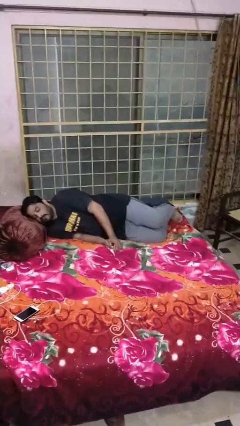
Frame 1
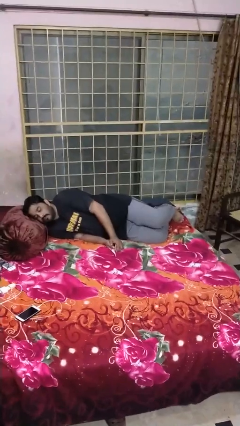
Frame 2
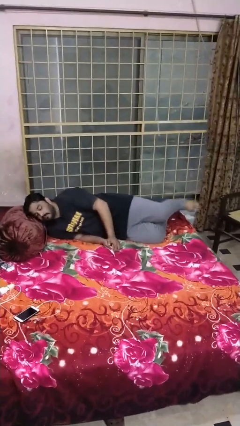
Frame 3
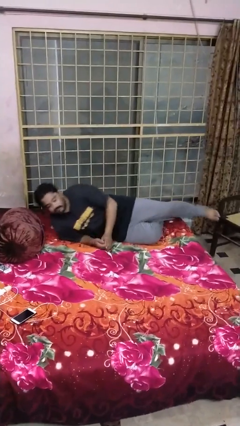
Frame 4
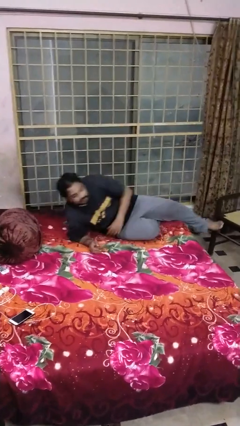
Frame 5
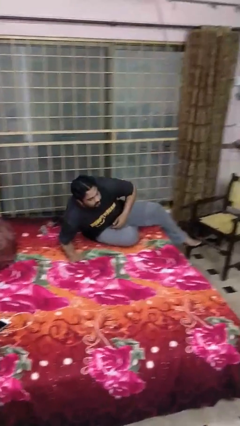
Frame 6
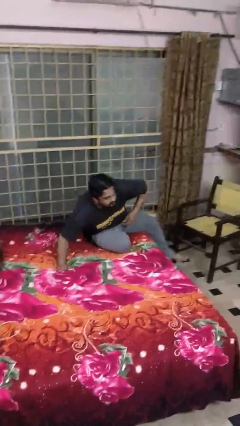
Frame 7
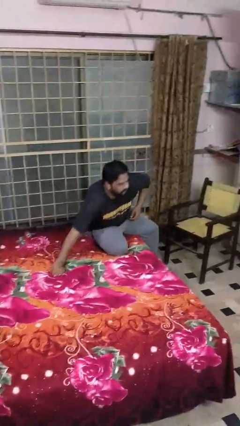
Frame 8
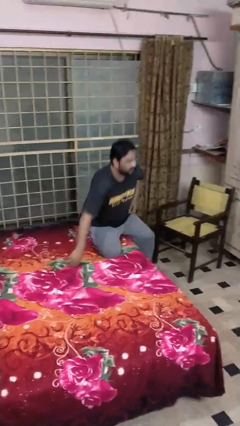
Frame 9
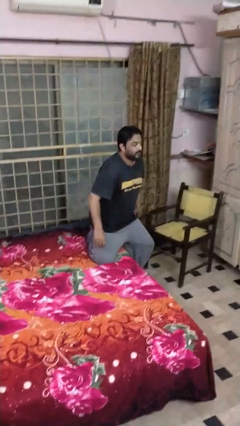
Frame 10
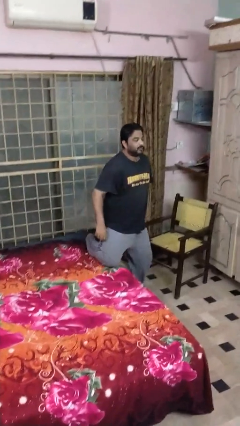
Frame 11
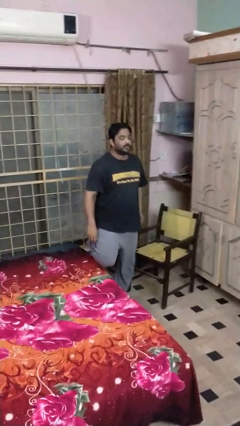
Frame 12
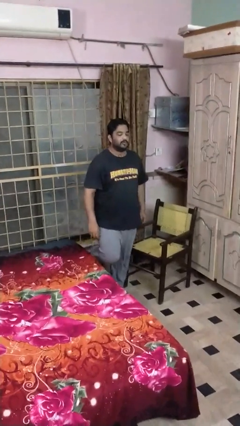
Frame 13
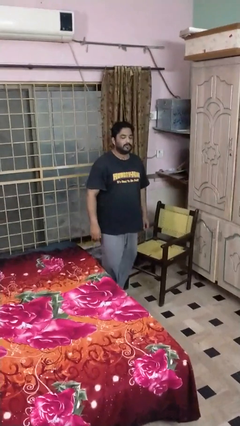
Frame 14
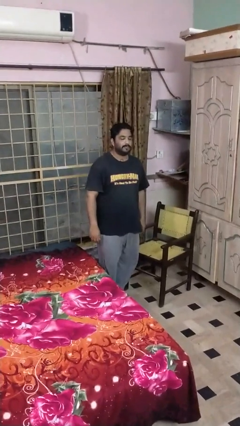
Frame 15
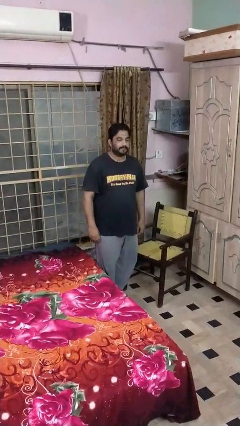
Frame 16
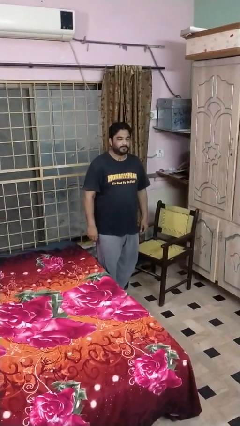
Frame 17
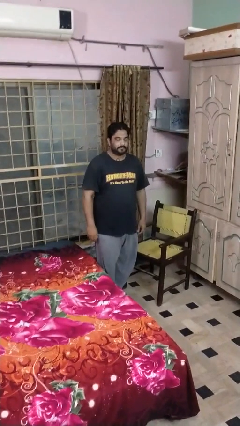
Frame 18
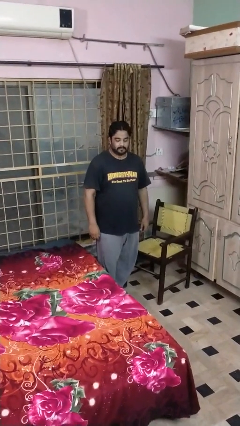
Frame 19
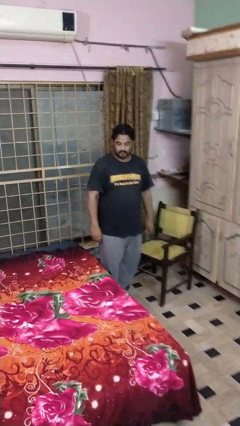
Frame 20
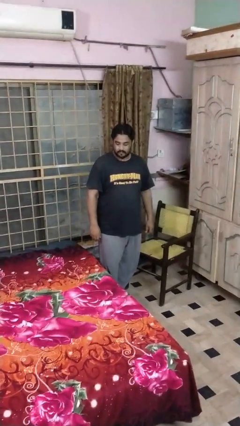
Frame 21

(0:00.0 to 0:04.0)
person stands up

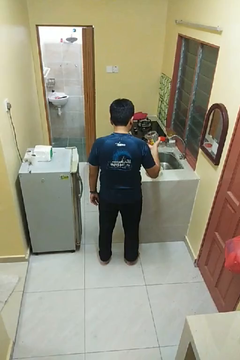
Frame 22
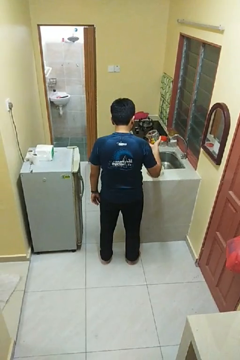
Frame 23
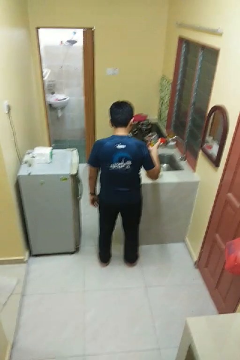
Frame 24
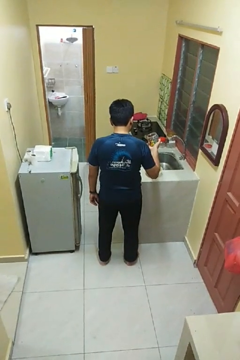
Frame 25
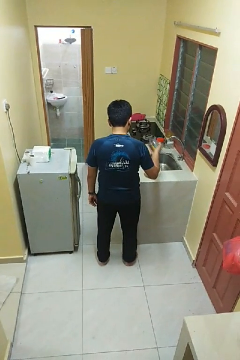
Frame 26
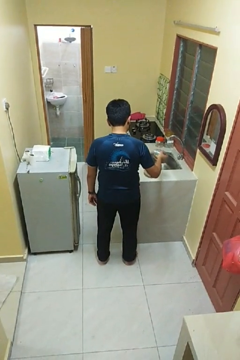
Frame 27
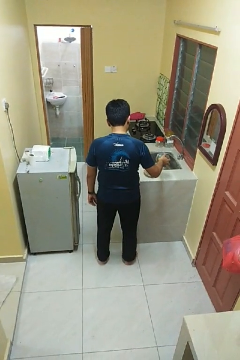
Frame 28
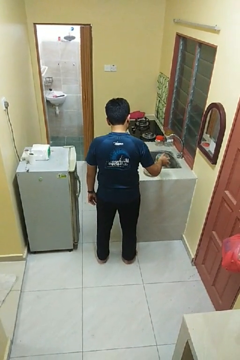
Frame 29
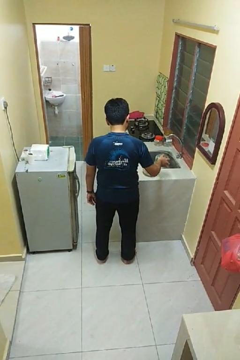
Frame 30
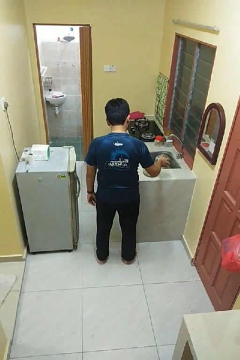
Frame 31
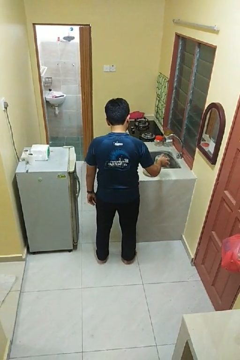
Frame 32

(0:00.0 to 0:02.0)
person pours into bowl

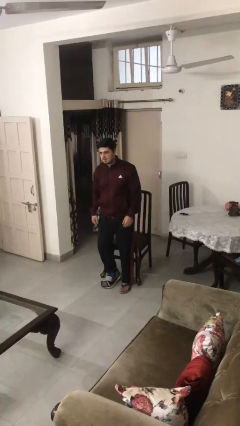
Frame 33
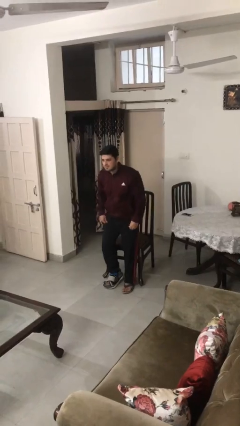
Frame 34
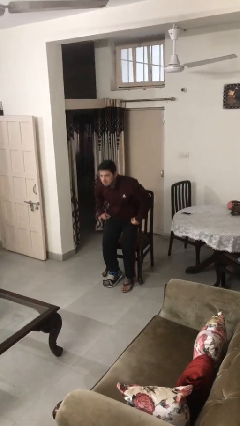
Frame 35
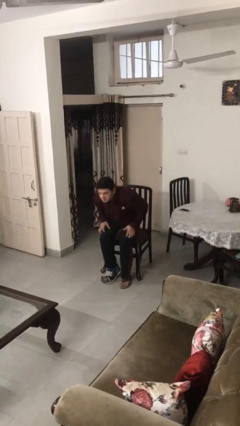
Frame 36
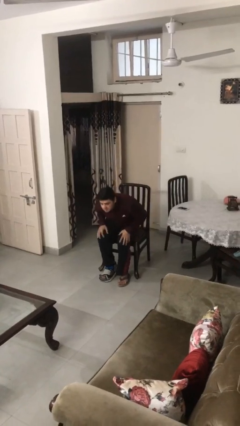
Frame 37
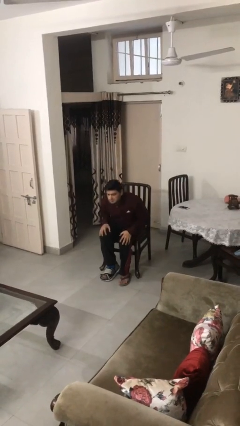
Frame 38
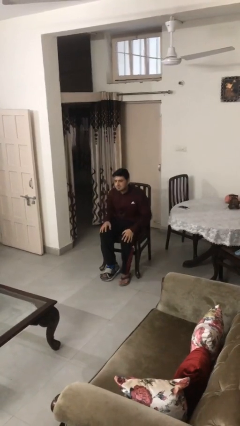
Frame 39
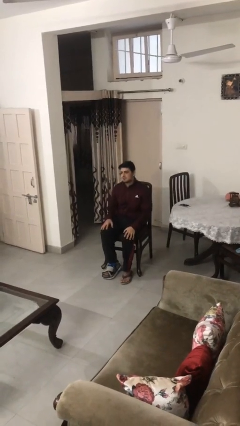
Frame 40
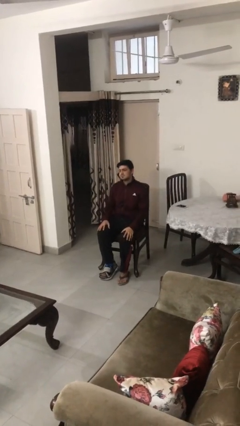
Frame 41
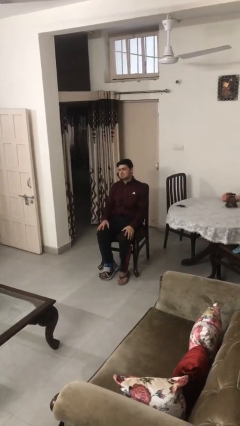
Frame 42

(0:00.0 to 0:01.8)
person sits down

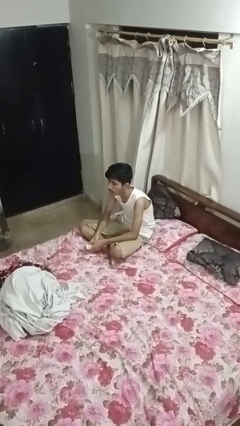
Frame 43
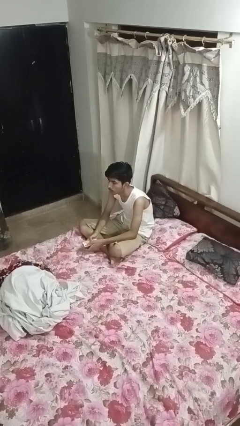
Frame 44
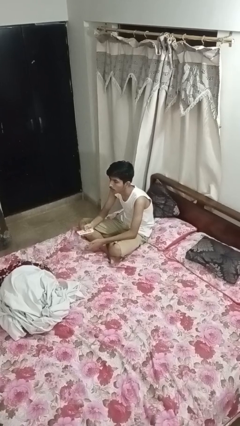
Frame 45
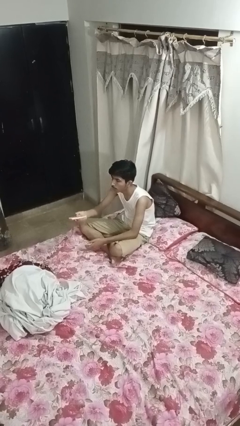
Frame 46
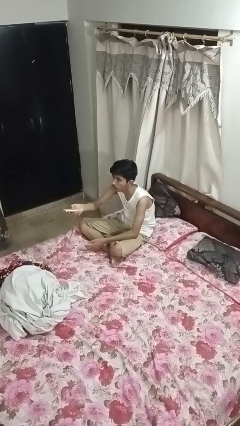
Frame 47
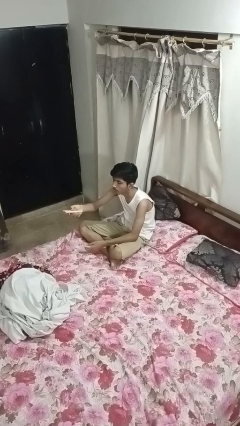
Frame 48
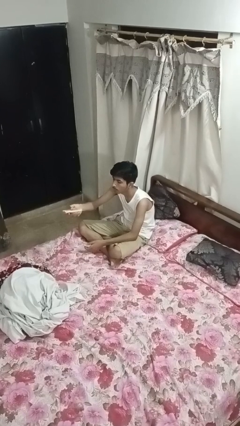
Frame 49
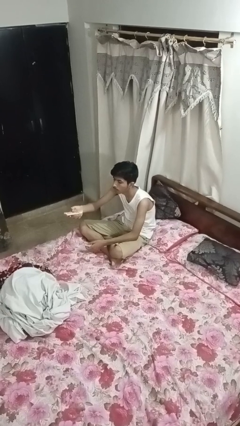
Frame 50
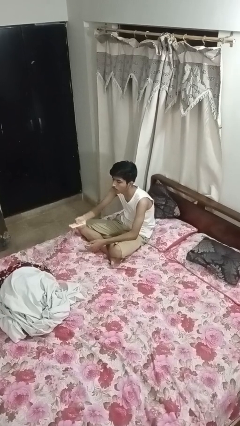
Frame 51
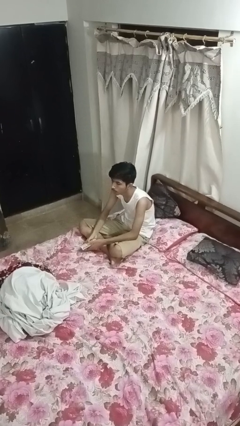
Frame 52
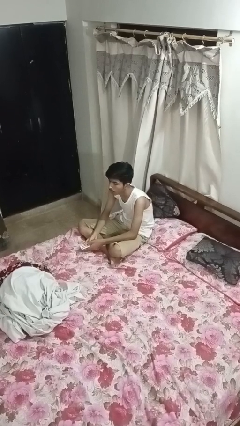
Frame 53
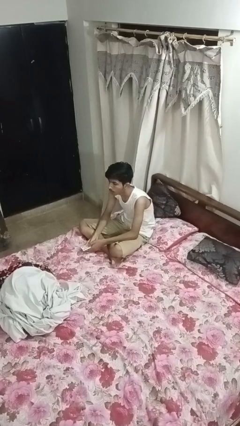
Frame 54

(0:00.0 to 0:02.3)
person uses television remote

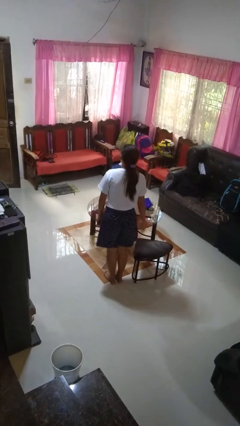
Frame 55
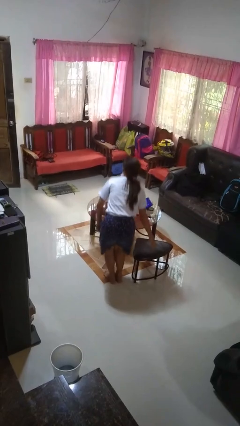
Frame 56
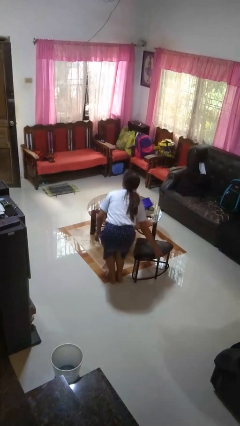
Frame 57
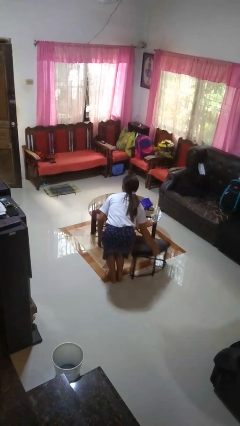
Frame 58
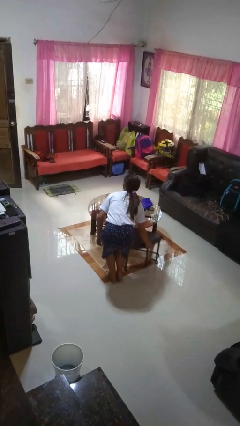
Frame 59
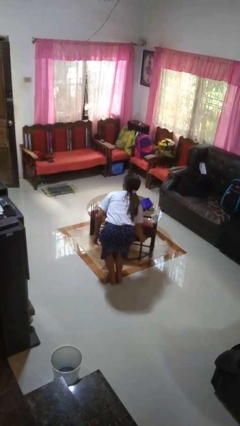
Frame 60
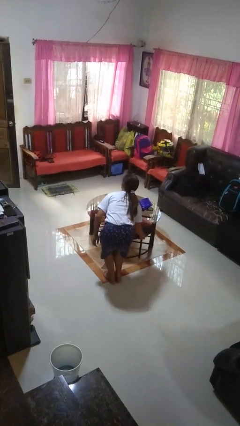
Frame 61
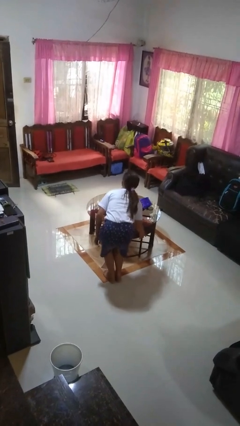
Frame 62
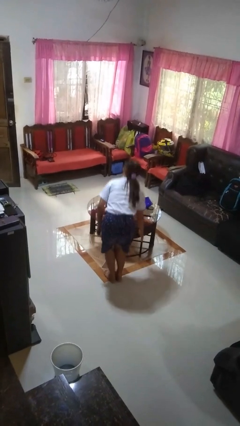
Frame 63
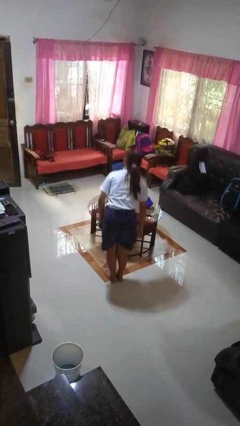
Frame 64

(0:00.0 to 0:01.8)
person pushes in chair

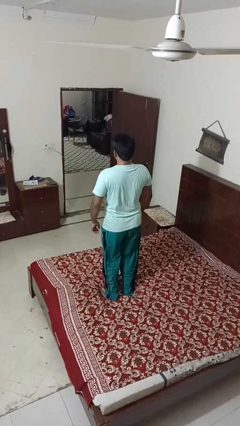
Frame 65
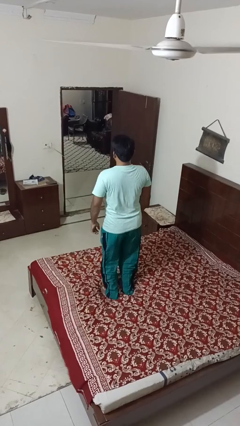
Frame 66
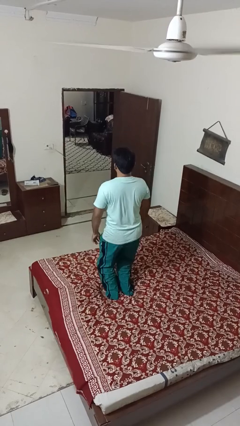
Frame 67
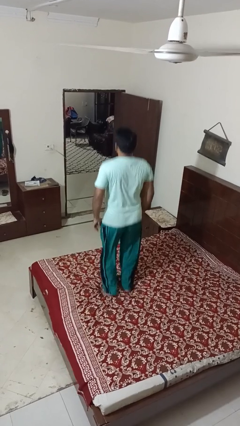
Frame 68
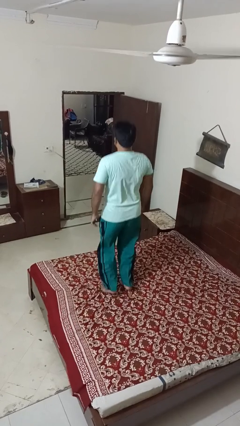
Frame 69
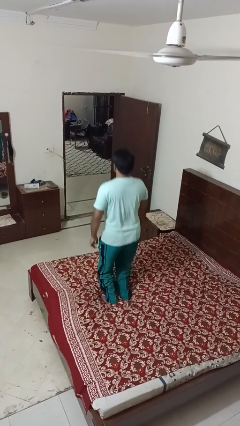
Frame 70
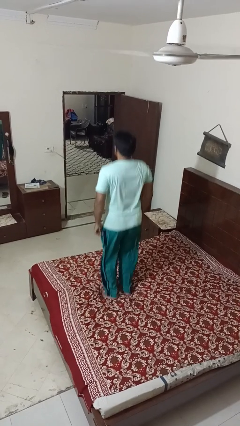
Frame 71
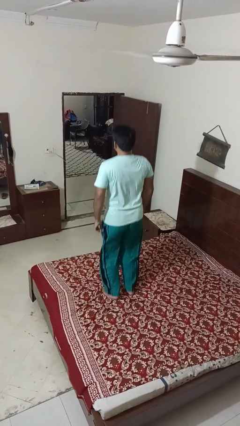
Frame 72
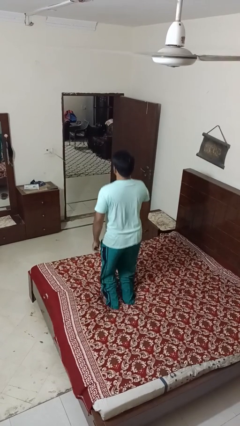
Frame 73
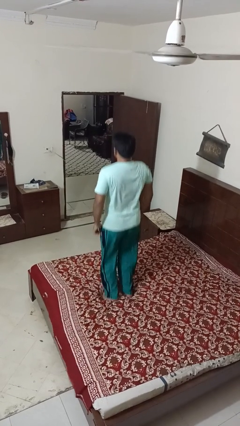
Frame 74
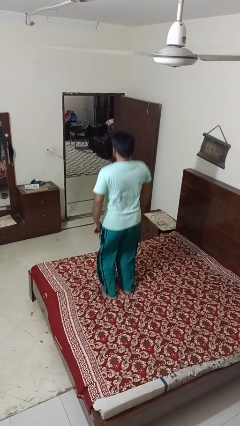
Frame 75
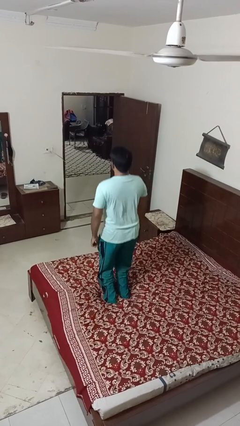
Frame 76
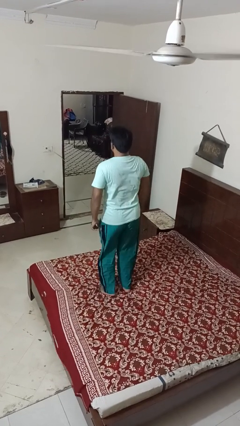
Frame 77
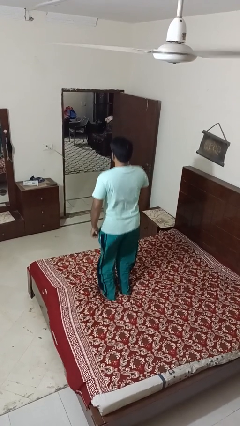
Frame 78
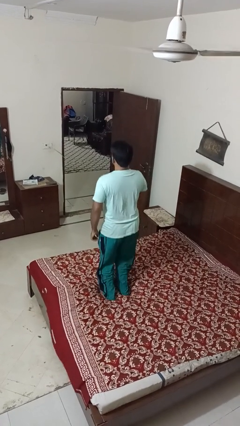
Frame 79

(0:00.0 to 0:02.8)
person jumps on bed

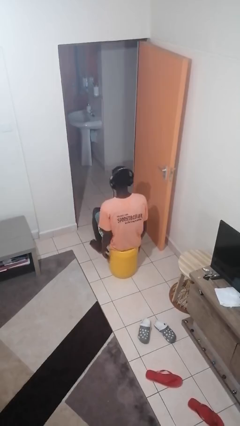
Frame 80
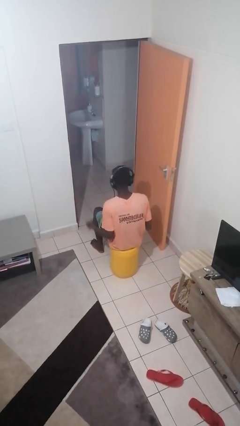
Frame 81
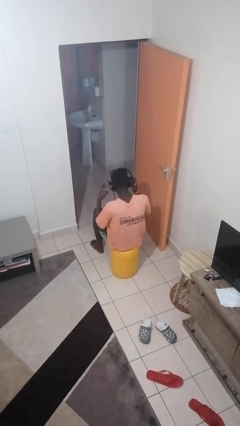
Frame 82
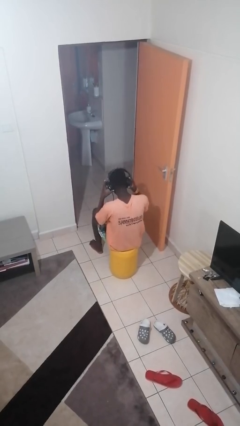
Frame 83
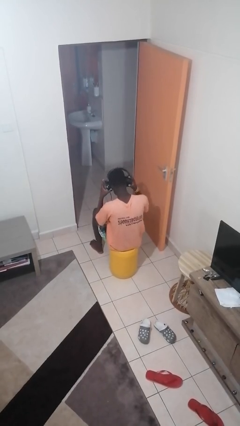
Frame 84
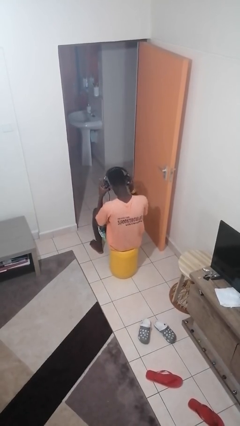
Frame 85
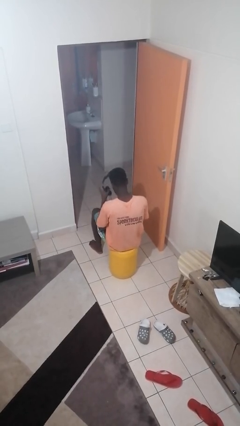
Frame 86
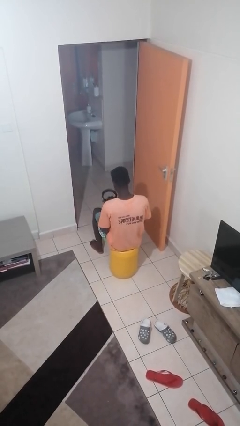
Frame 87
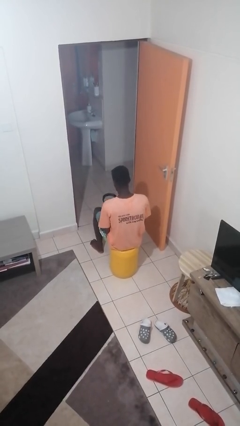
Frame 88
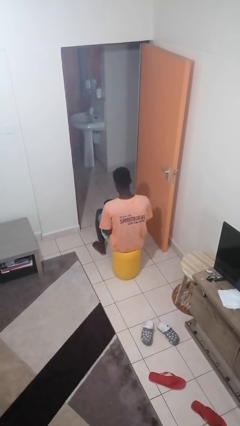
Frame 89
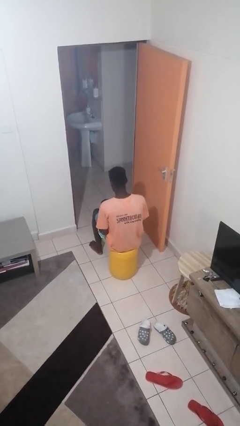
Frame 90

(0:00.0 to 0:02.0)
person takes off headphones

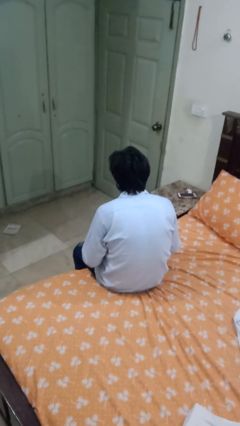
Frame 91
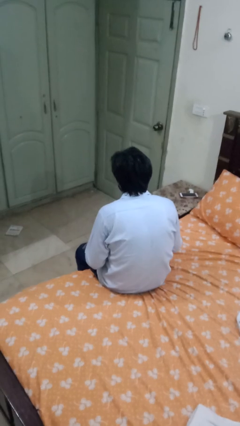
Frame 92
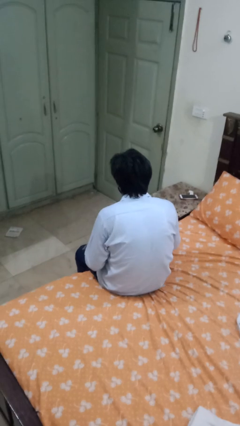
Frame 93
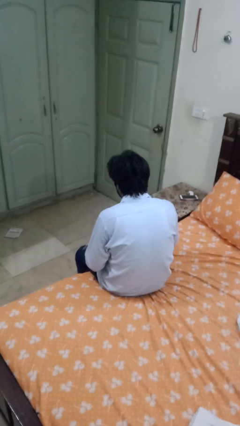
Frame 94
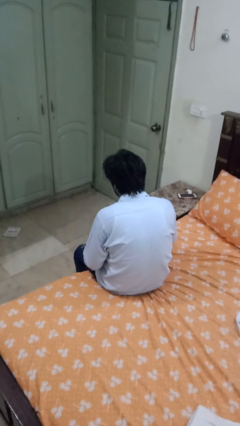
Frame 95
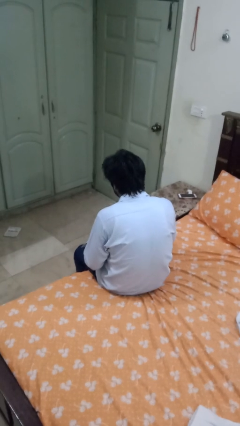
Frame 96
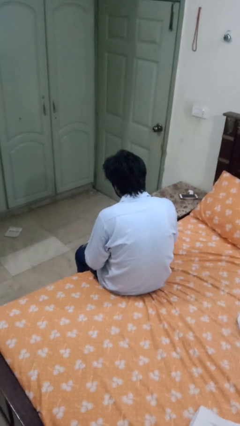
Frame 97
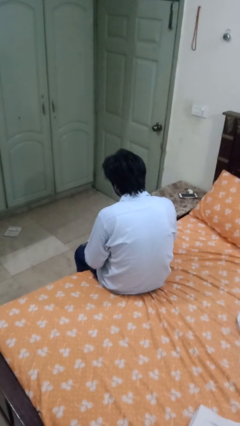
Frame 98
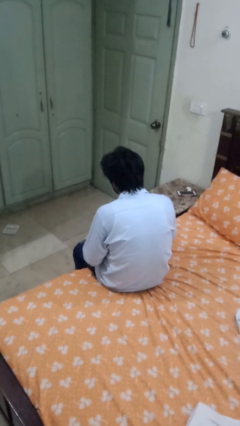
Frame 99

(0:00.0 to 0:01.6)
person stirs mug
